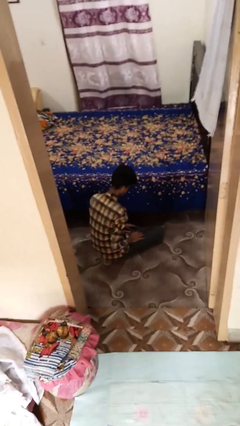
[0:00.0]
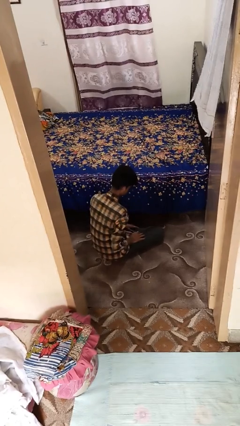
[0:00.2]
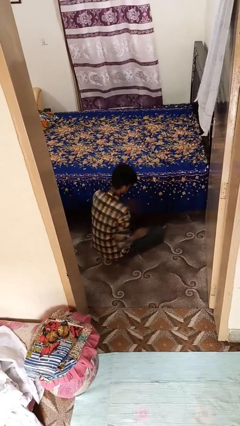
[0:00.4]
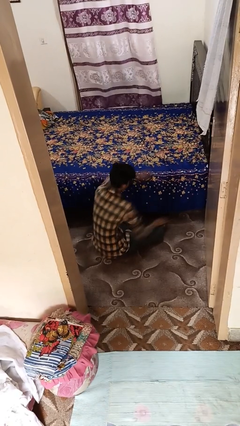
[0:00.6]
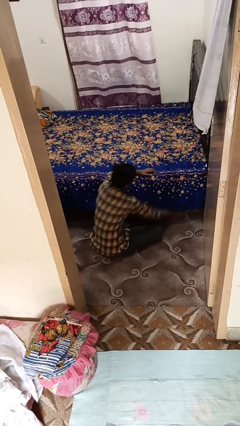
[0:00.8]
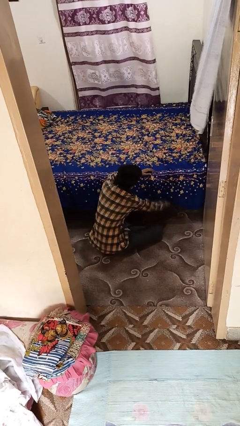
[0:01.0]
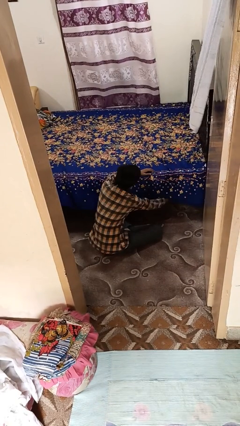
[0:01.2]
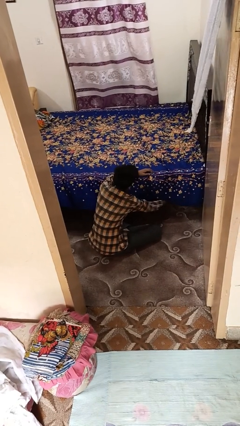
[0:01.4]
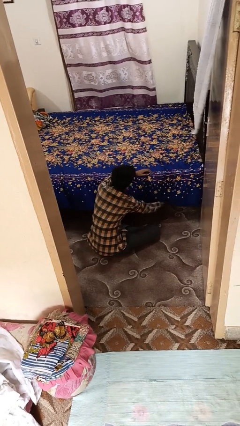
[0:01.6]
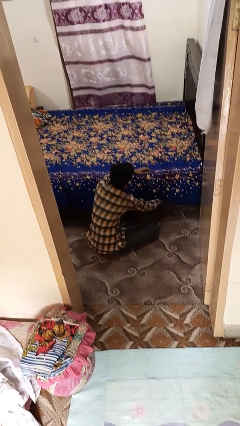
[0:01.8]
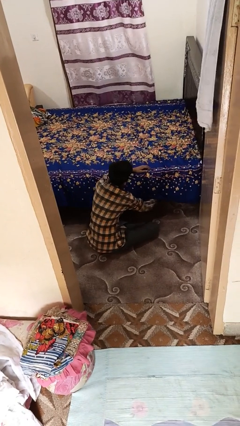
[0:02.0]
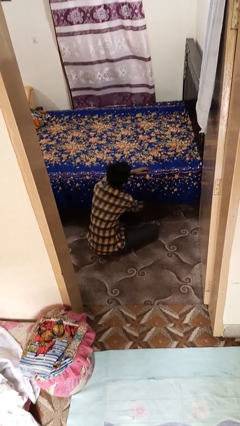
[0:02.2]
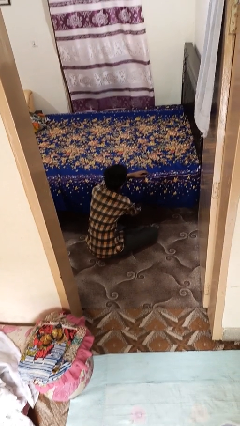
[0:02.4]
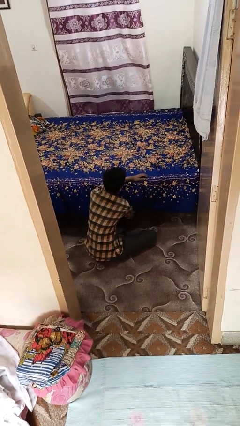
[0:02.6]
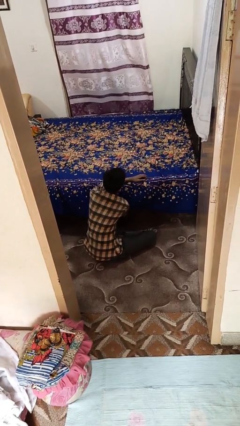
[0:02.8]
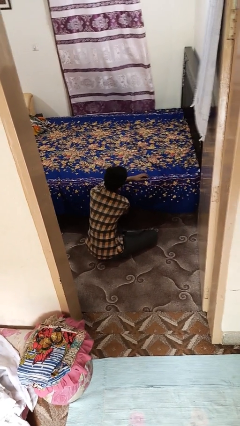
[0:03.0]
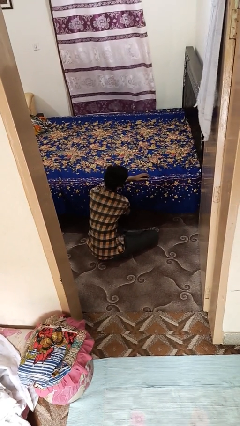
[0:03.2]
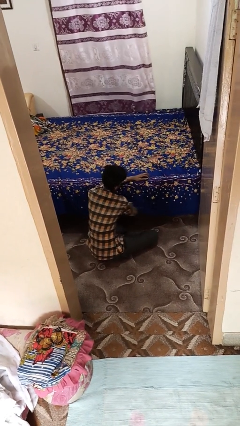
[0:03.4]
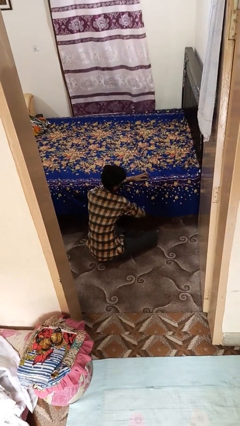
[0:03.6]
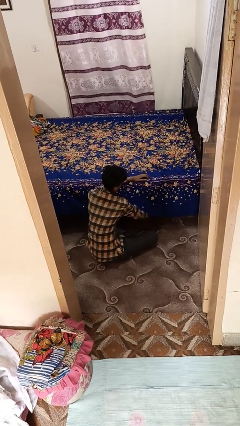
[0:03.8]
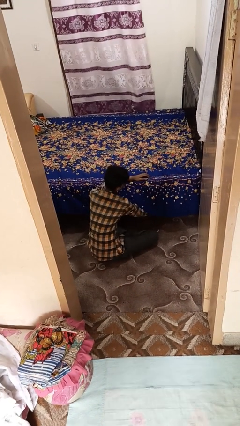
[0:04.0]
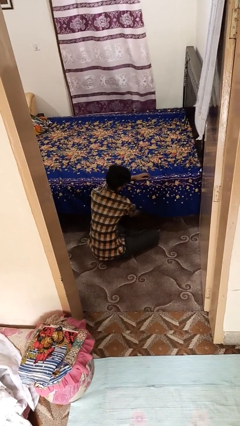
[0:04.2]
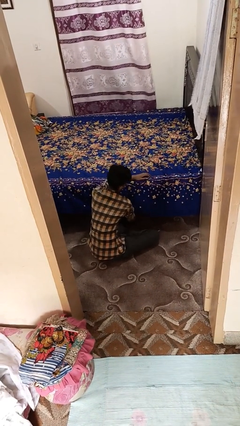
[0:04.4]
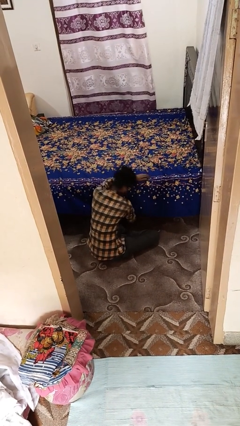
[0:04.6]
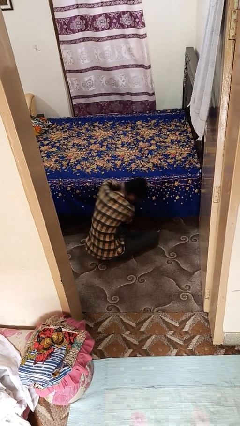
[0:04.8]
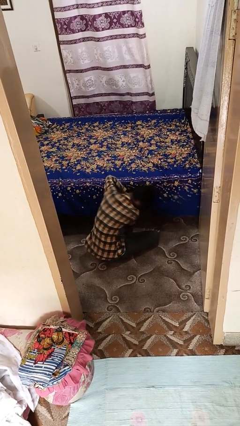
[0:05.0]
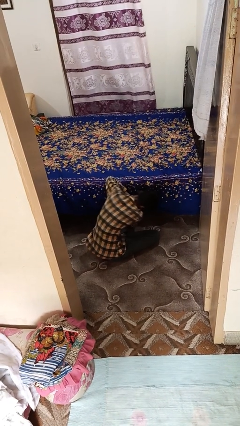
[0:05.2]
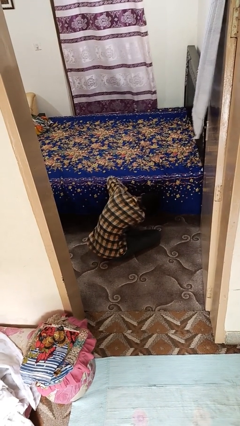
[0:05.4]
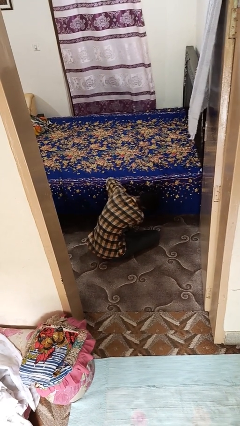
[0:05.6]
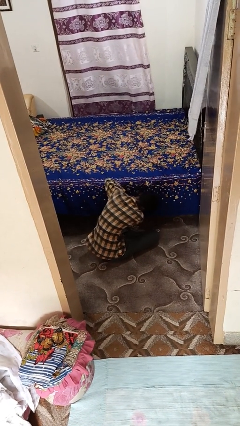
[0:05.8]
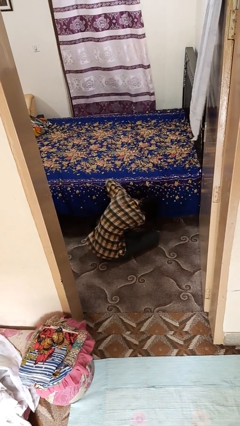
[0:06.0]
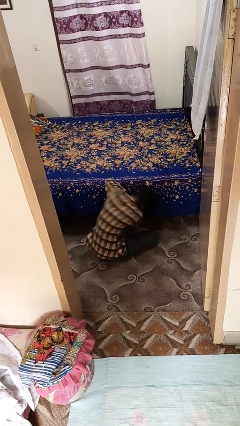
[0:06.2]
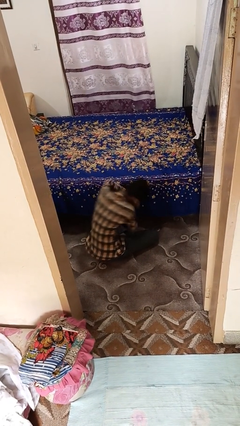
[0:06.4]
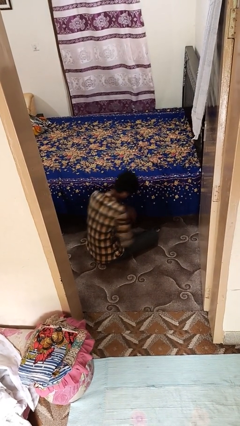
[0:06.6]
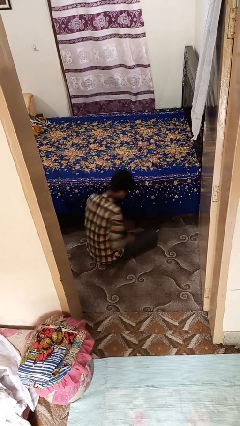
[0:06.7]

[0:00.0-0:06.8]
person searches under bed

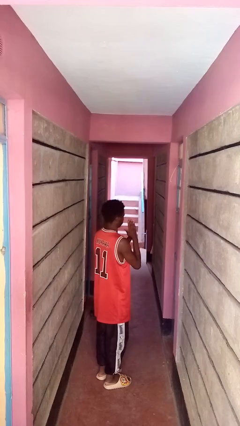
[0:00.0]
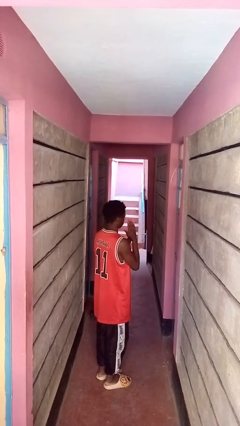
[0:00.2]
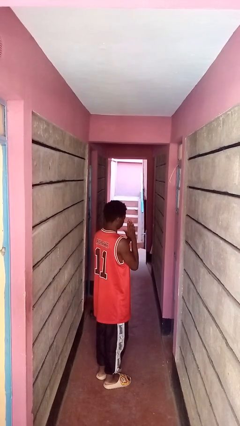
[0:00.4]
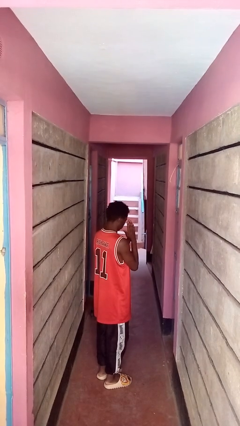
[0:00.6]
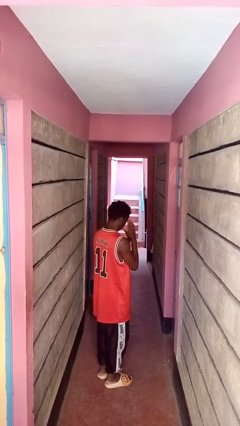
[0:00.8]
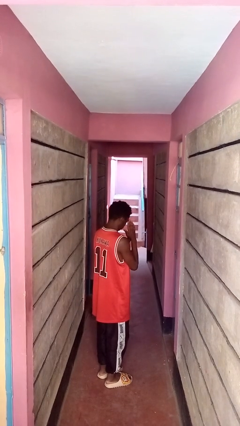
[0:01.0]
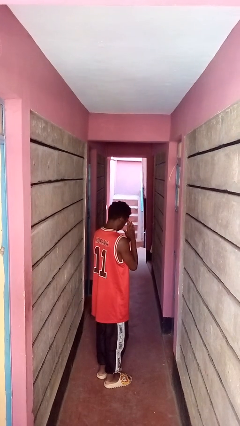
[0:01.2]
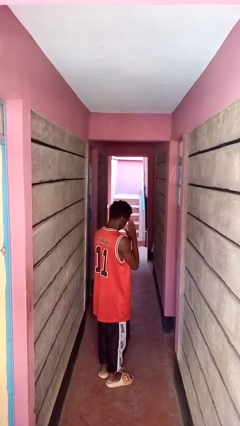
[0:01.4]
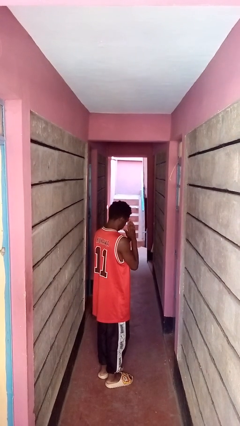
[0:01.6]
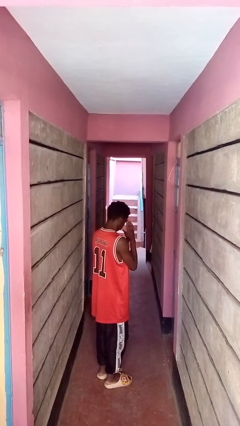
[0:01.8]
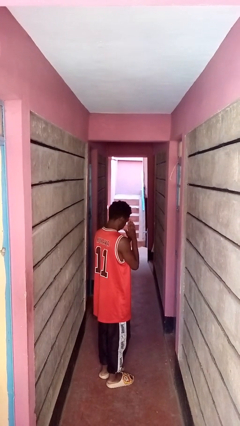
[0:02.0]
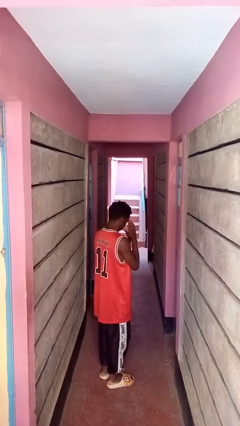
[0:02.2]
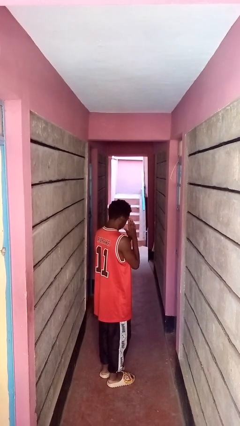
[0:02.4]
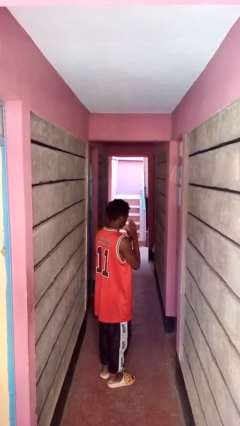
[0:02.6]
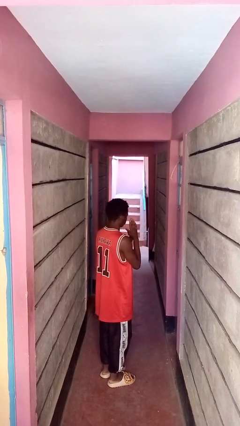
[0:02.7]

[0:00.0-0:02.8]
person prays

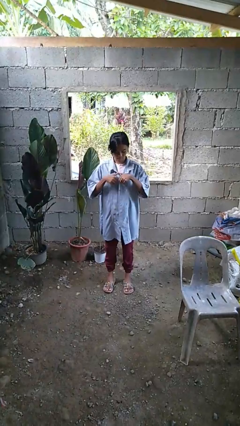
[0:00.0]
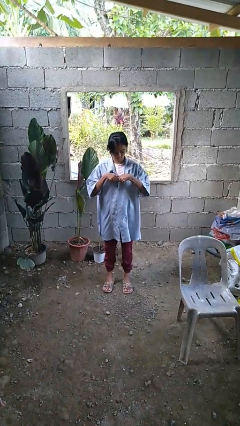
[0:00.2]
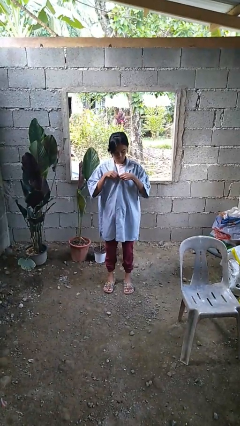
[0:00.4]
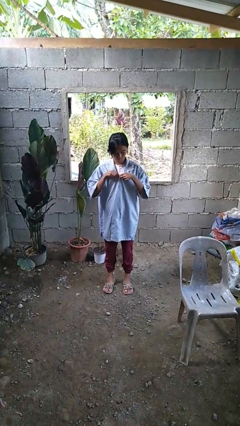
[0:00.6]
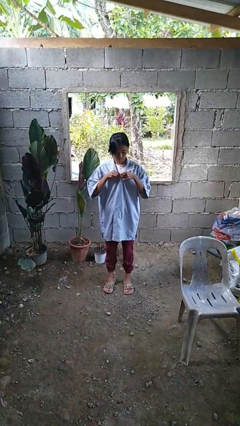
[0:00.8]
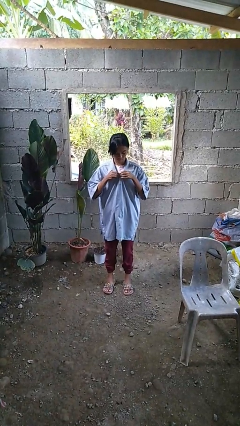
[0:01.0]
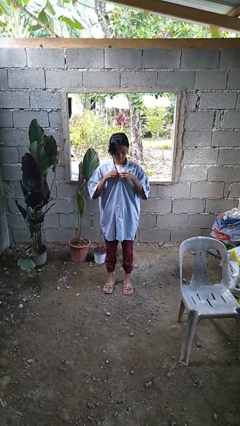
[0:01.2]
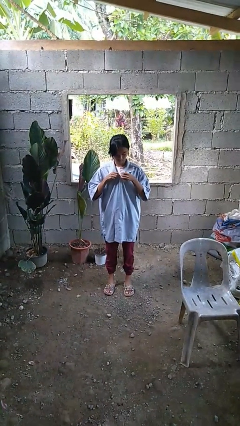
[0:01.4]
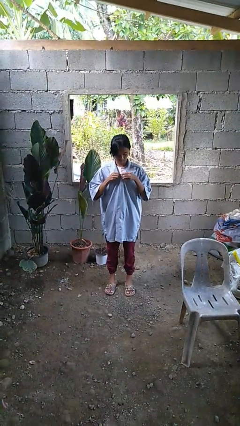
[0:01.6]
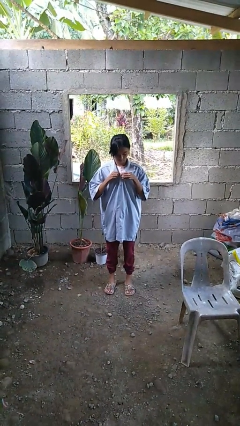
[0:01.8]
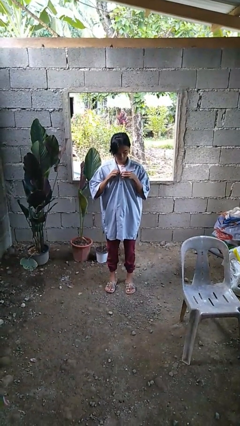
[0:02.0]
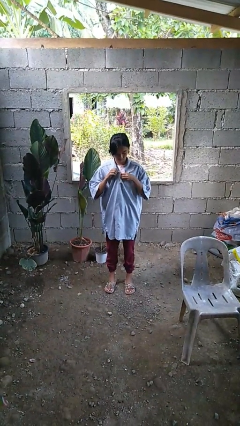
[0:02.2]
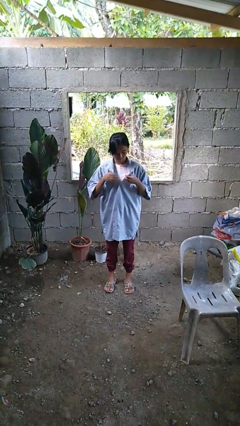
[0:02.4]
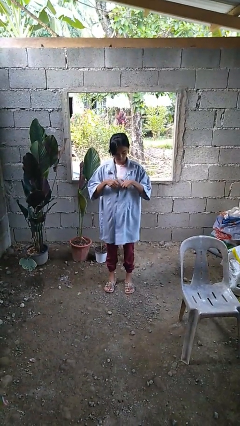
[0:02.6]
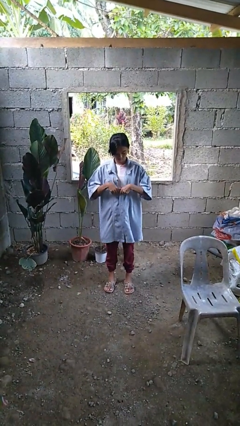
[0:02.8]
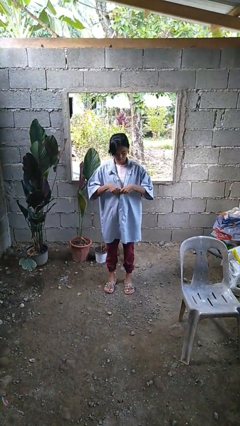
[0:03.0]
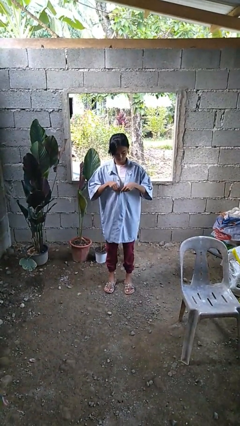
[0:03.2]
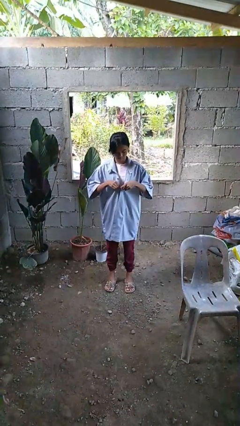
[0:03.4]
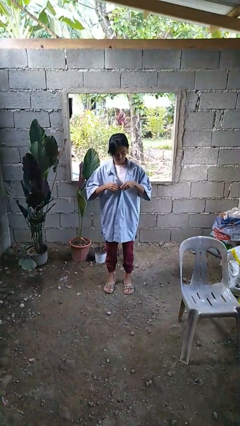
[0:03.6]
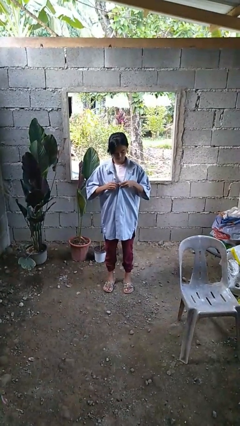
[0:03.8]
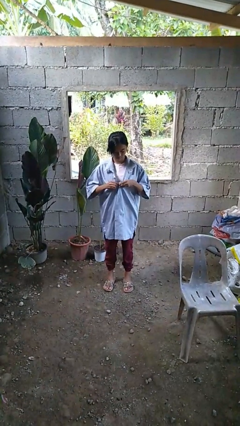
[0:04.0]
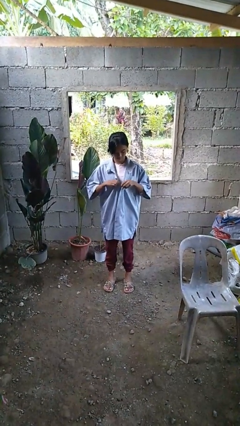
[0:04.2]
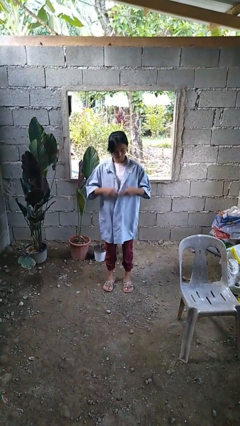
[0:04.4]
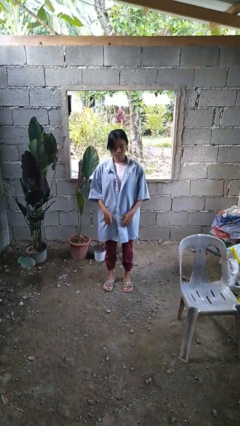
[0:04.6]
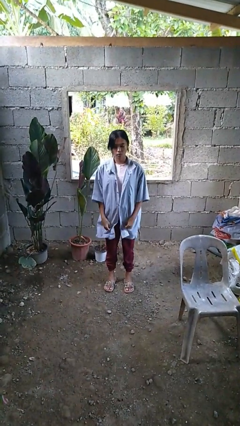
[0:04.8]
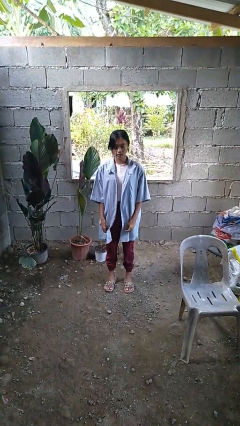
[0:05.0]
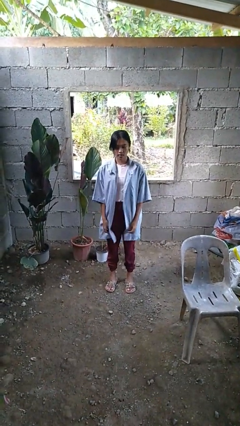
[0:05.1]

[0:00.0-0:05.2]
person unbuttons shirt

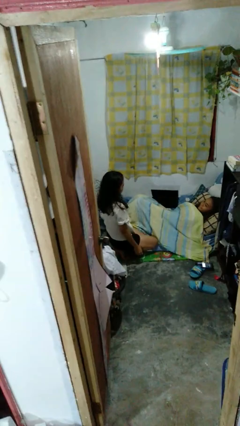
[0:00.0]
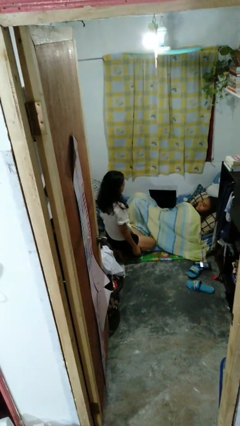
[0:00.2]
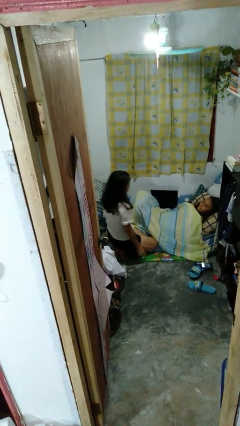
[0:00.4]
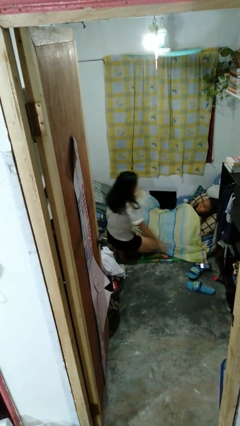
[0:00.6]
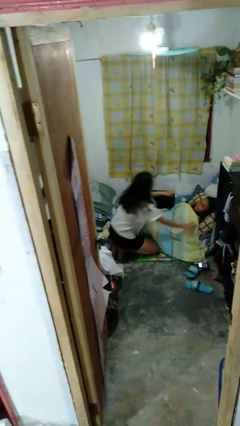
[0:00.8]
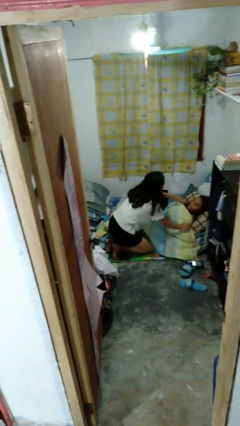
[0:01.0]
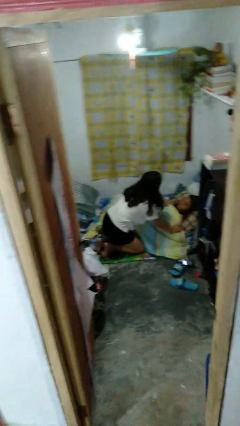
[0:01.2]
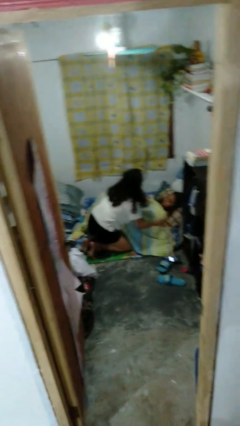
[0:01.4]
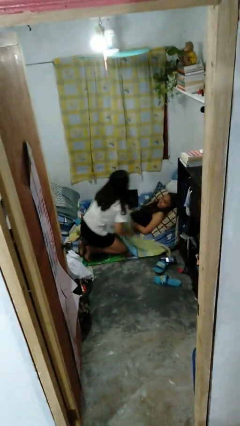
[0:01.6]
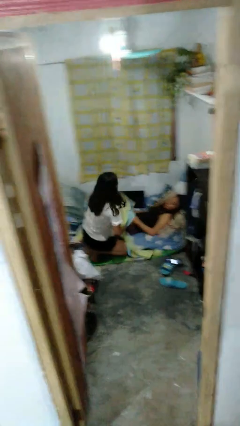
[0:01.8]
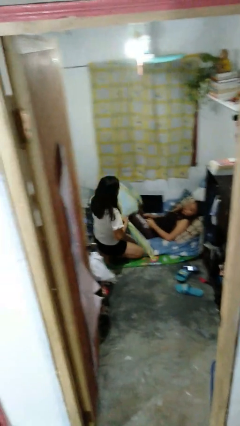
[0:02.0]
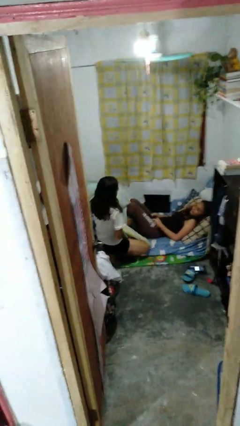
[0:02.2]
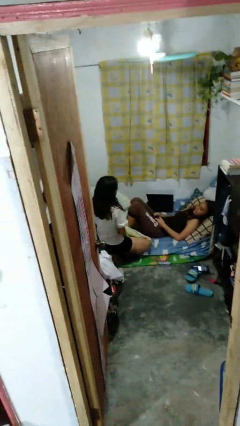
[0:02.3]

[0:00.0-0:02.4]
person uncovers friend with blanket

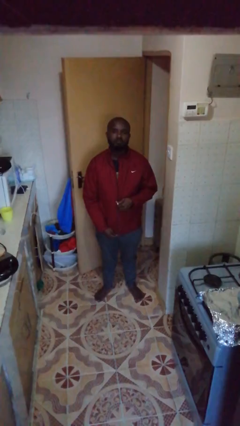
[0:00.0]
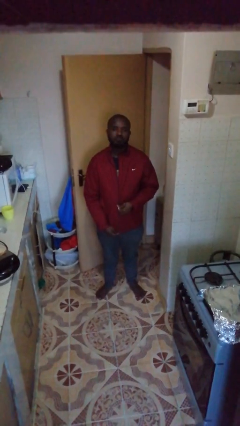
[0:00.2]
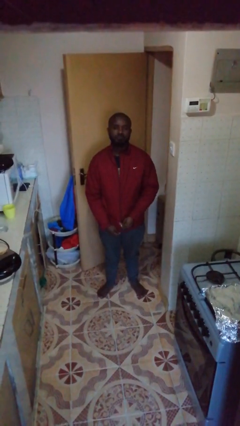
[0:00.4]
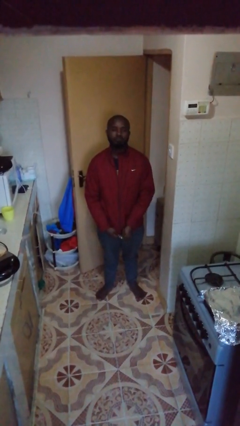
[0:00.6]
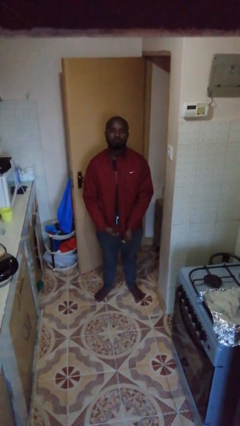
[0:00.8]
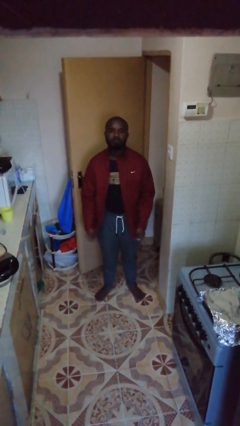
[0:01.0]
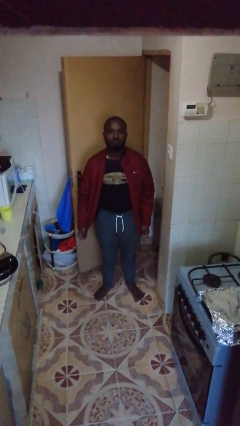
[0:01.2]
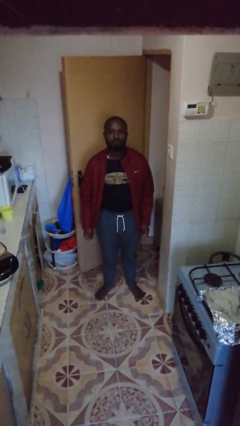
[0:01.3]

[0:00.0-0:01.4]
person unzips jacket
